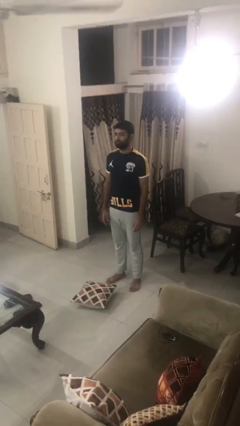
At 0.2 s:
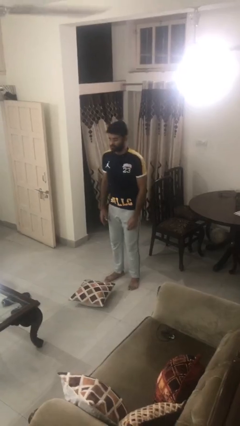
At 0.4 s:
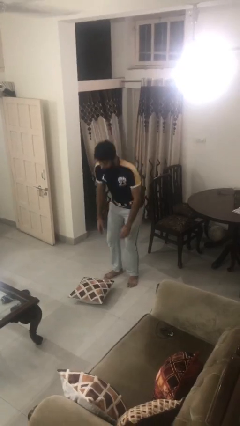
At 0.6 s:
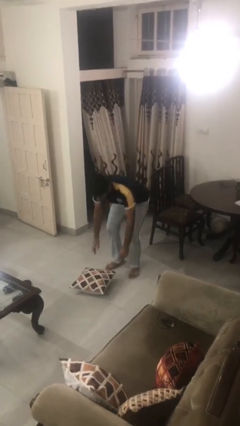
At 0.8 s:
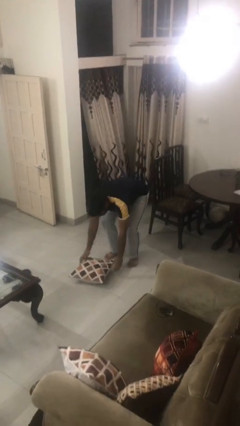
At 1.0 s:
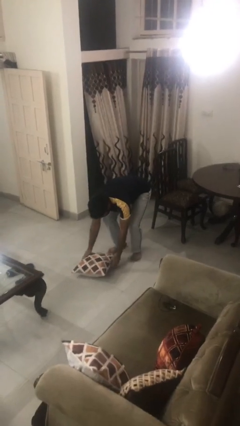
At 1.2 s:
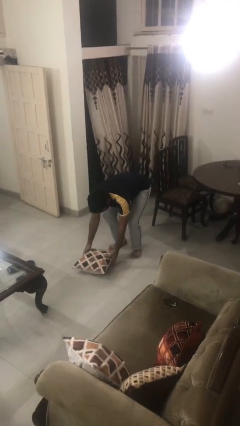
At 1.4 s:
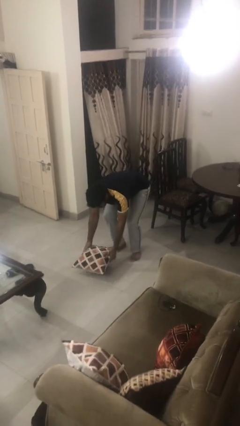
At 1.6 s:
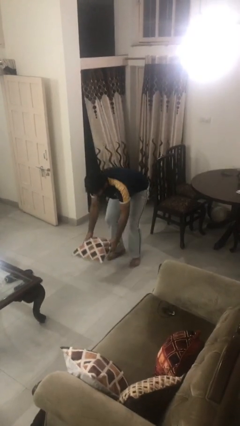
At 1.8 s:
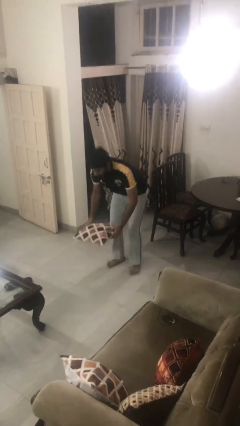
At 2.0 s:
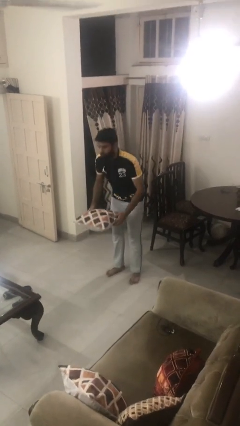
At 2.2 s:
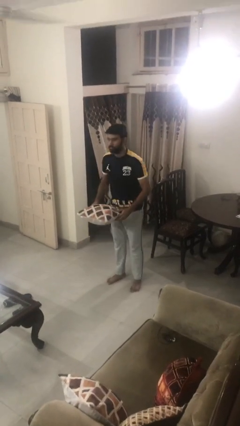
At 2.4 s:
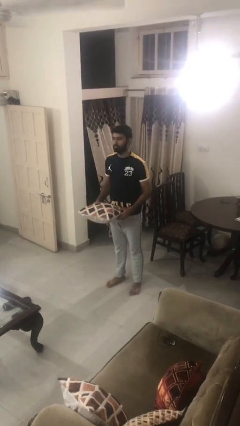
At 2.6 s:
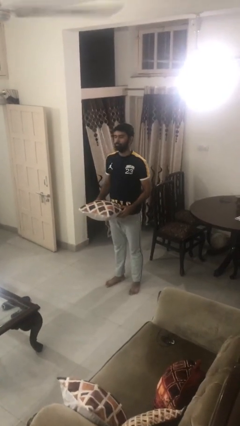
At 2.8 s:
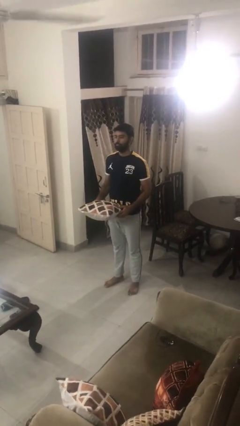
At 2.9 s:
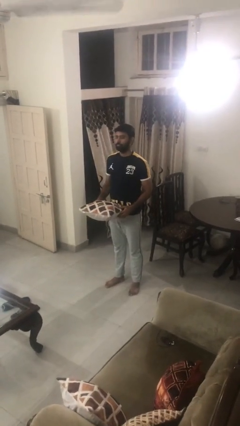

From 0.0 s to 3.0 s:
person picks up object from floor

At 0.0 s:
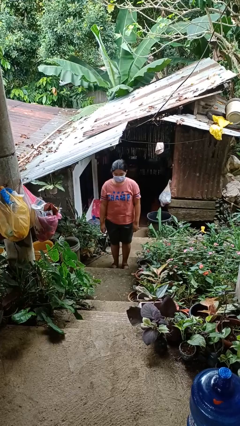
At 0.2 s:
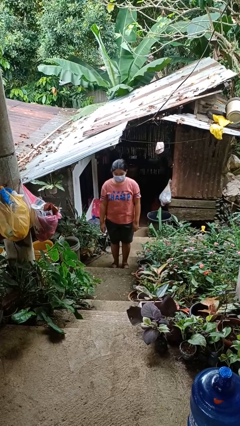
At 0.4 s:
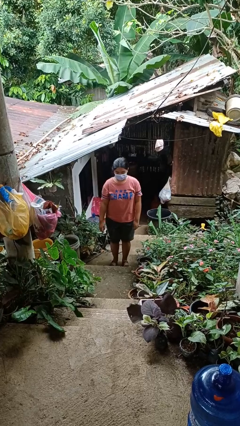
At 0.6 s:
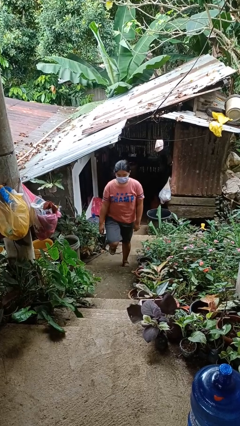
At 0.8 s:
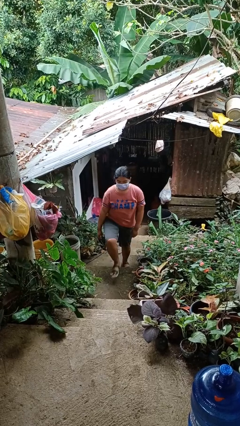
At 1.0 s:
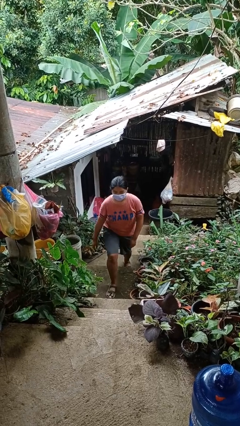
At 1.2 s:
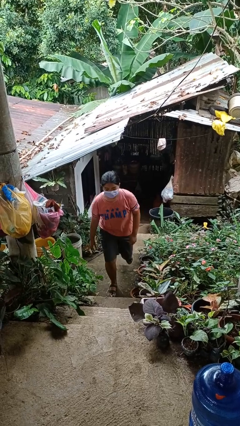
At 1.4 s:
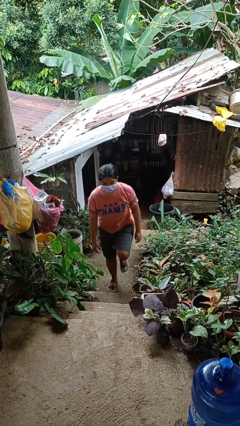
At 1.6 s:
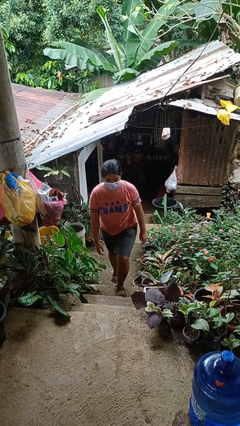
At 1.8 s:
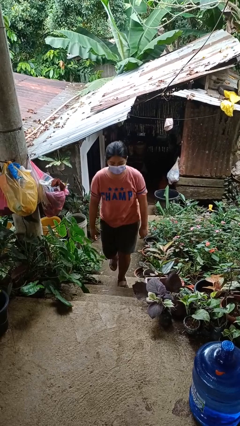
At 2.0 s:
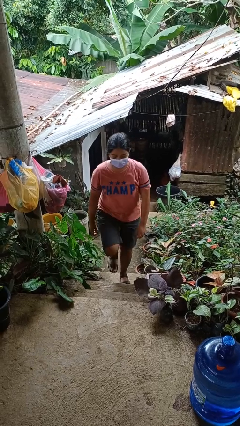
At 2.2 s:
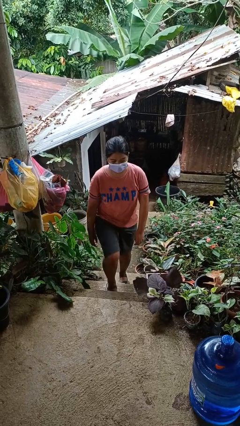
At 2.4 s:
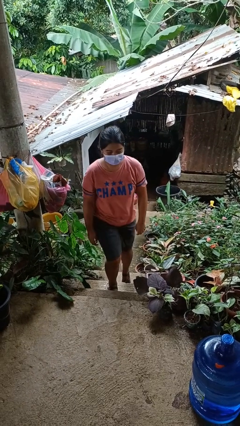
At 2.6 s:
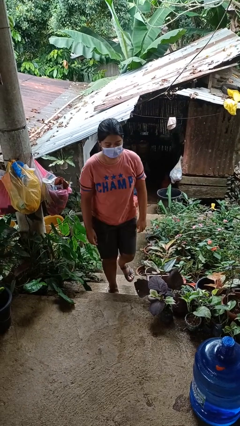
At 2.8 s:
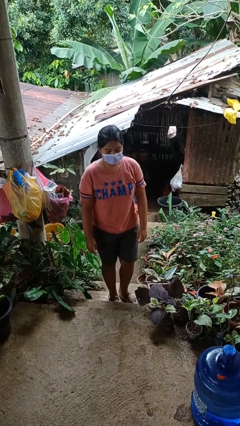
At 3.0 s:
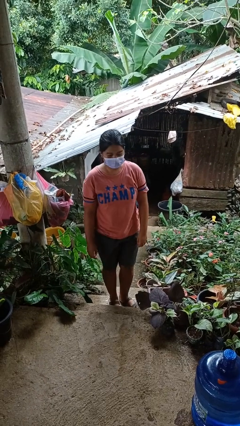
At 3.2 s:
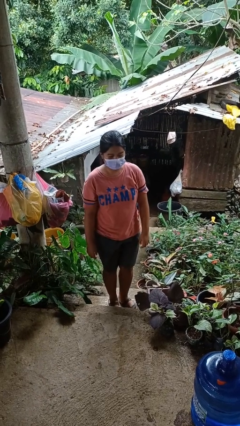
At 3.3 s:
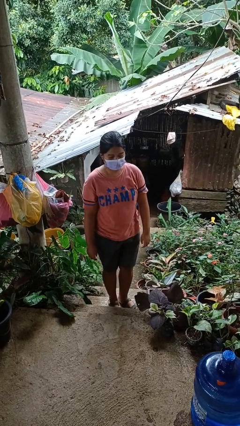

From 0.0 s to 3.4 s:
person climbs up stairs

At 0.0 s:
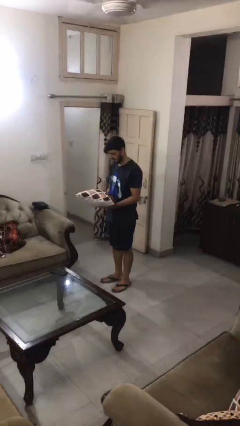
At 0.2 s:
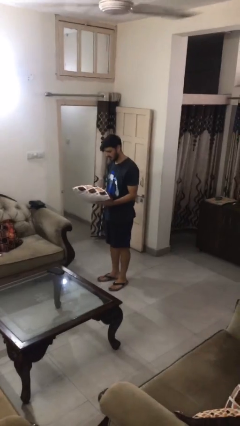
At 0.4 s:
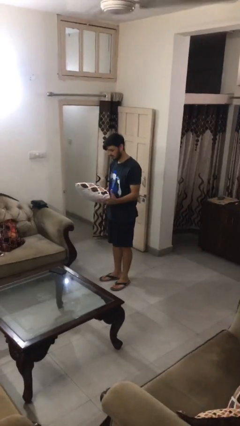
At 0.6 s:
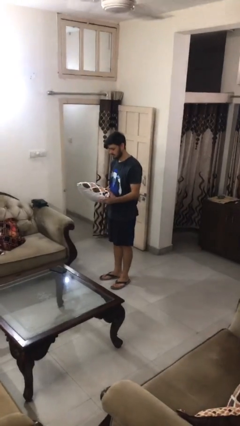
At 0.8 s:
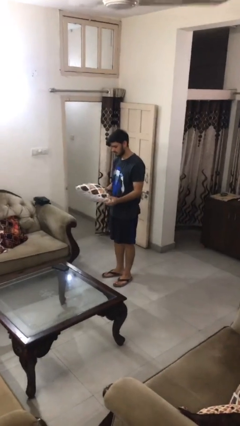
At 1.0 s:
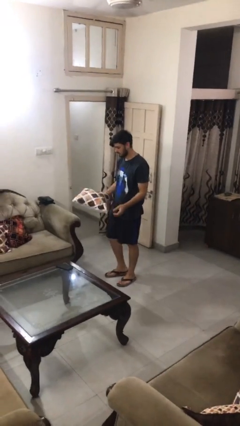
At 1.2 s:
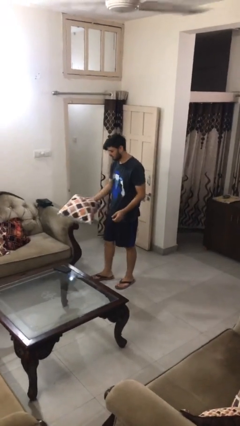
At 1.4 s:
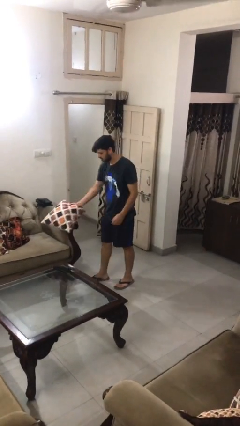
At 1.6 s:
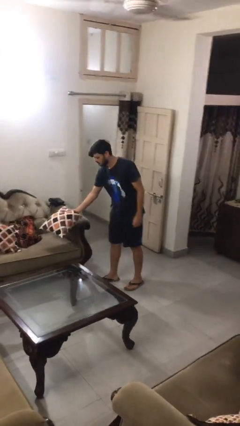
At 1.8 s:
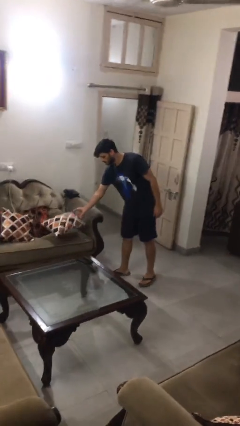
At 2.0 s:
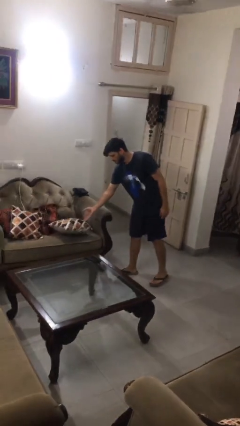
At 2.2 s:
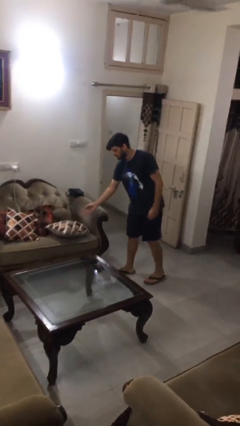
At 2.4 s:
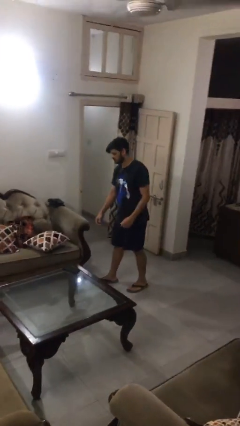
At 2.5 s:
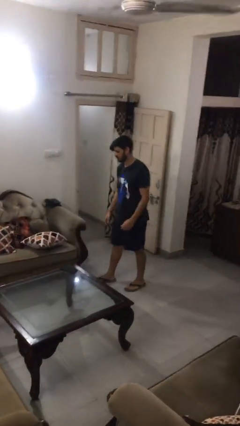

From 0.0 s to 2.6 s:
person puts down object on couch

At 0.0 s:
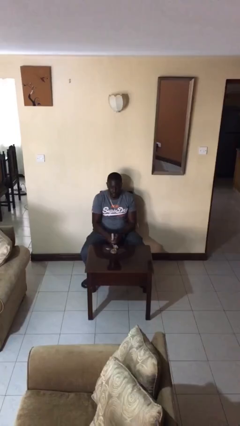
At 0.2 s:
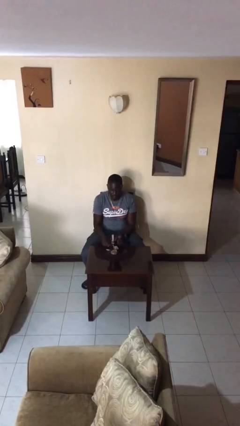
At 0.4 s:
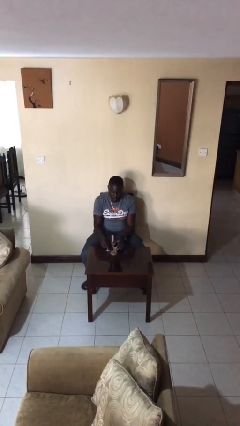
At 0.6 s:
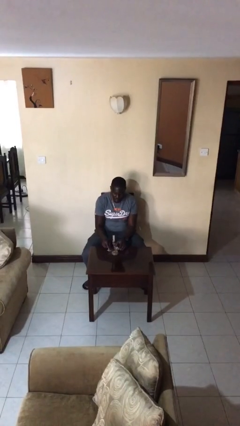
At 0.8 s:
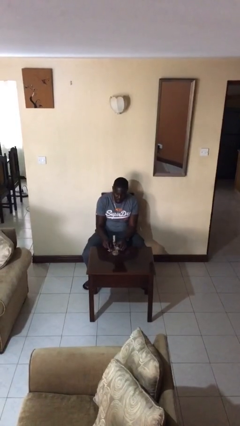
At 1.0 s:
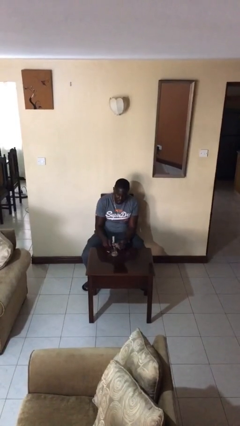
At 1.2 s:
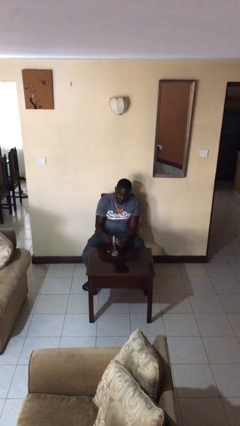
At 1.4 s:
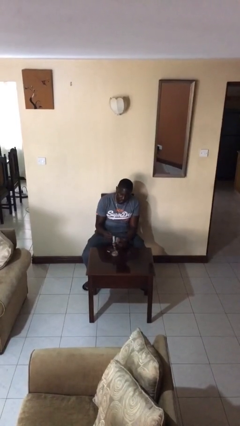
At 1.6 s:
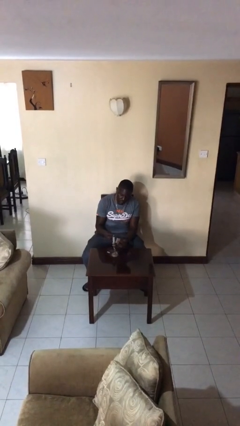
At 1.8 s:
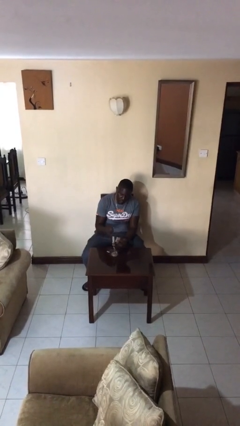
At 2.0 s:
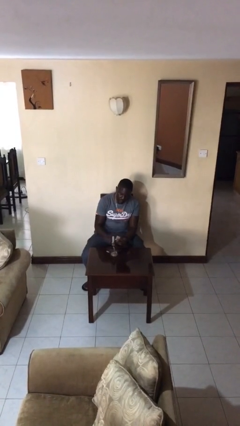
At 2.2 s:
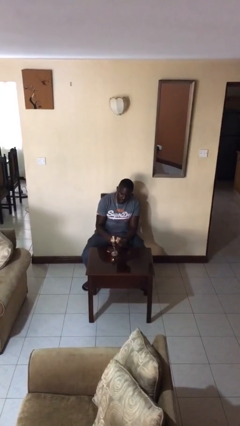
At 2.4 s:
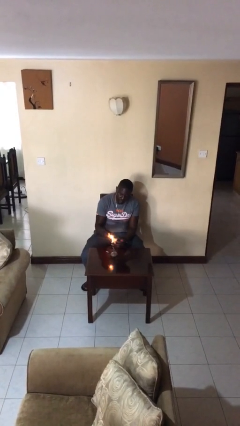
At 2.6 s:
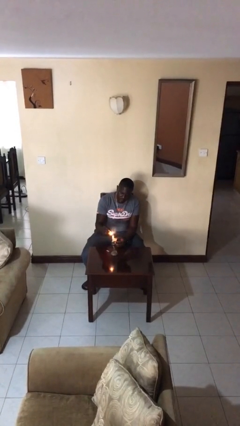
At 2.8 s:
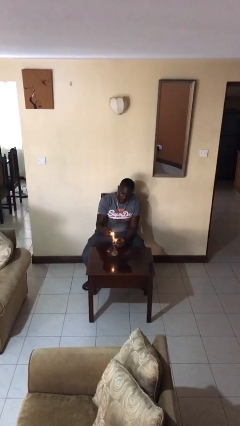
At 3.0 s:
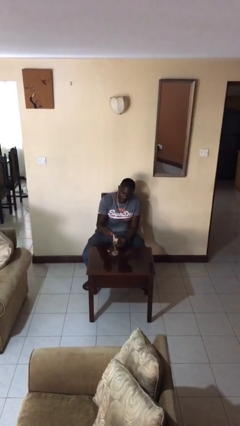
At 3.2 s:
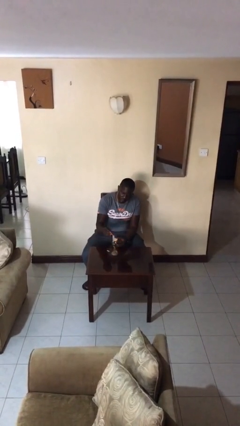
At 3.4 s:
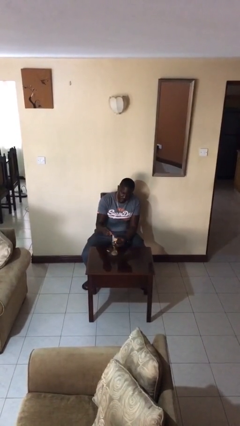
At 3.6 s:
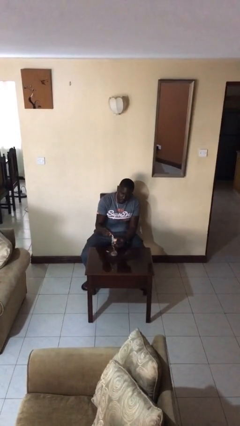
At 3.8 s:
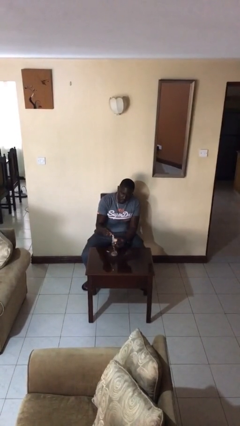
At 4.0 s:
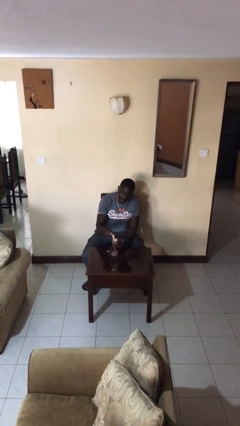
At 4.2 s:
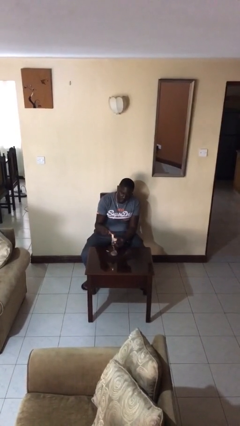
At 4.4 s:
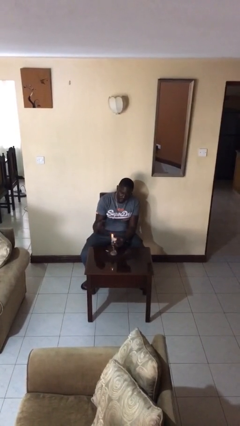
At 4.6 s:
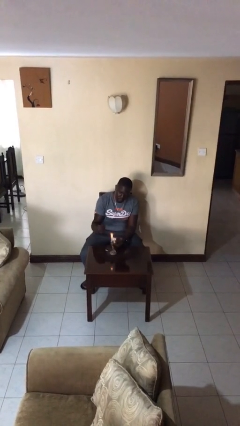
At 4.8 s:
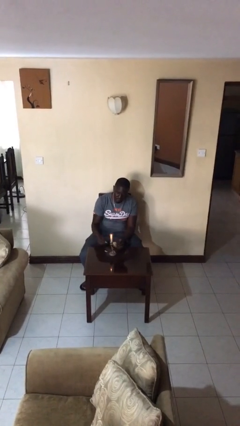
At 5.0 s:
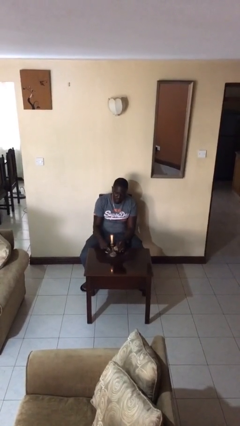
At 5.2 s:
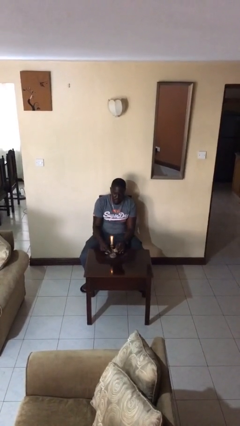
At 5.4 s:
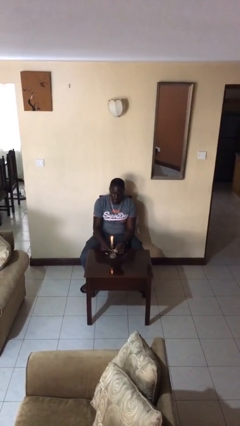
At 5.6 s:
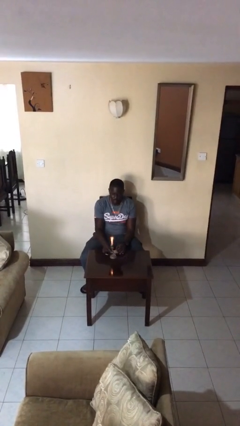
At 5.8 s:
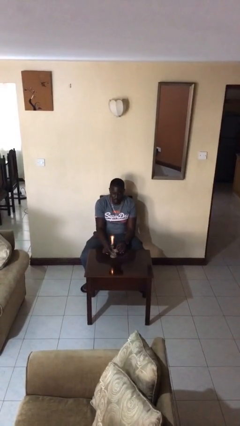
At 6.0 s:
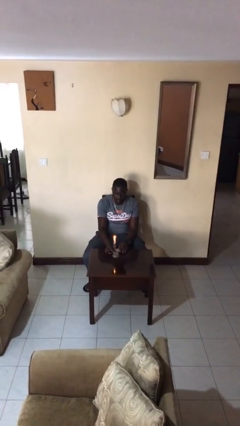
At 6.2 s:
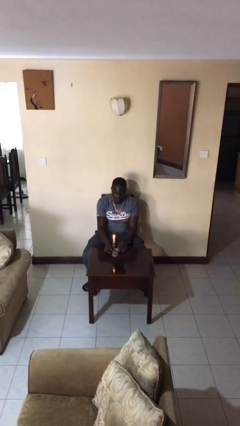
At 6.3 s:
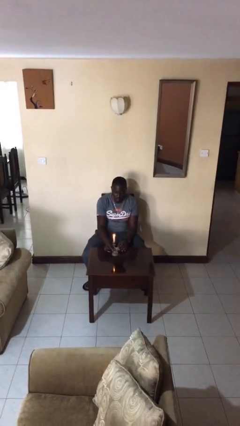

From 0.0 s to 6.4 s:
person lights candle

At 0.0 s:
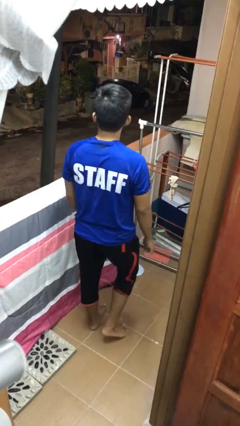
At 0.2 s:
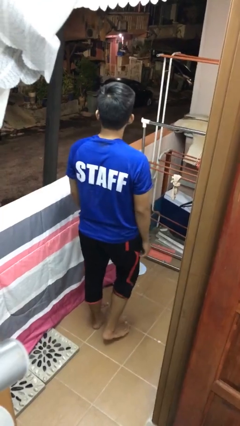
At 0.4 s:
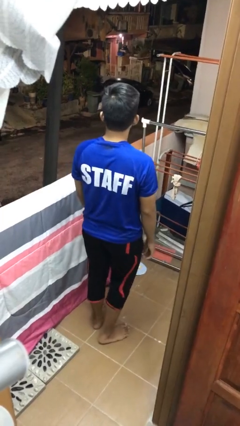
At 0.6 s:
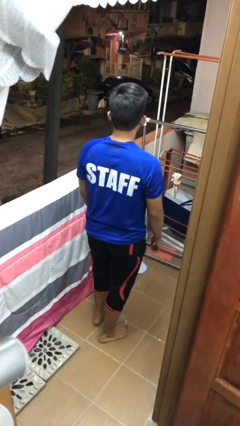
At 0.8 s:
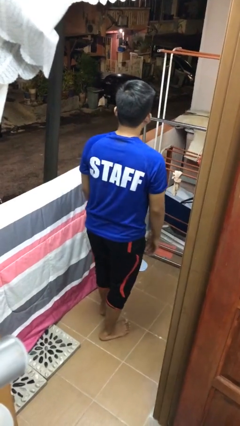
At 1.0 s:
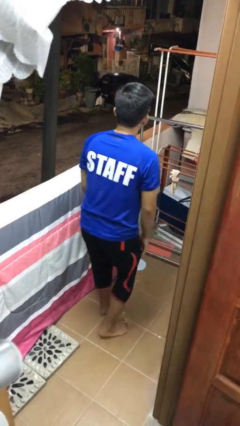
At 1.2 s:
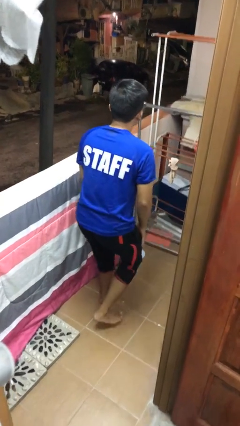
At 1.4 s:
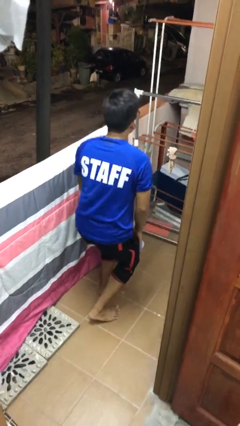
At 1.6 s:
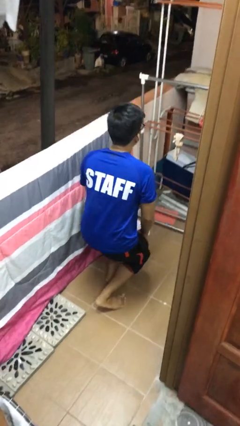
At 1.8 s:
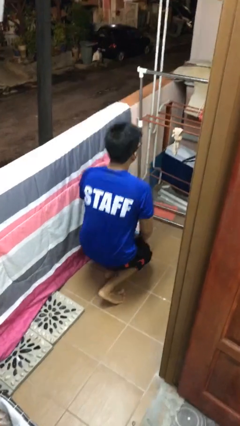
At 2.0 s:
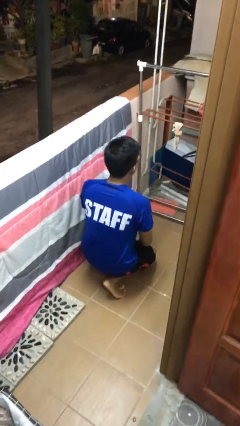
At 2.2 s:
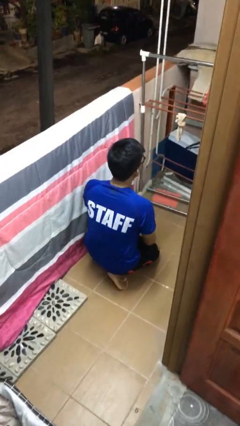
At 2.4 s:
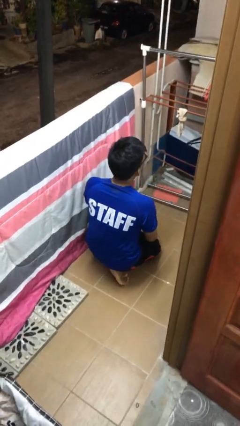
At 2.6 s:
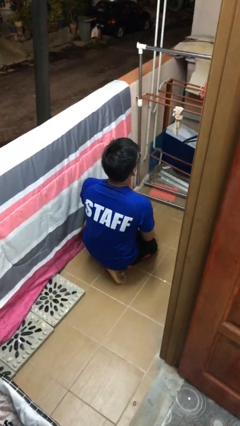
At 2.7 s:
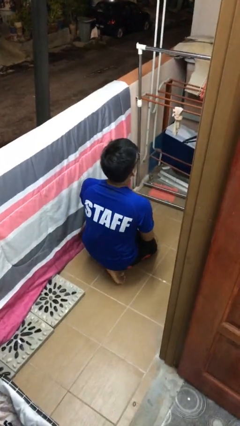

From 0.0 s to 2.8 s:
person kneels
